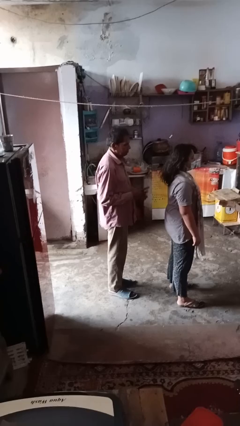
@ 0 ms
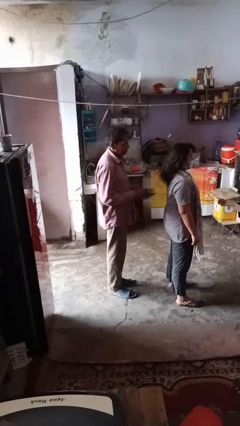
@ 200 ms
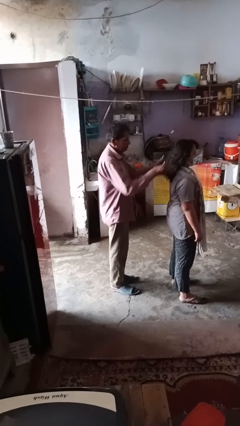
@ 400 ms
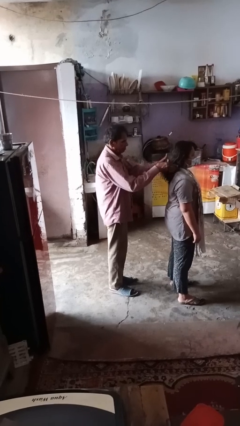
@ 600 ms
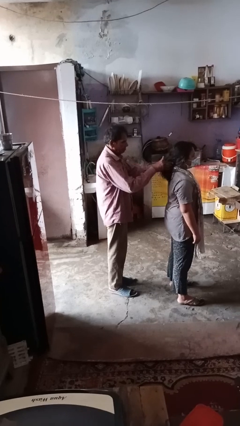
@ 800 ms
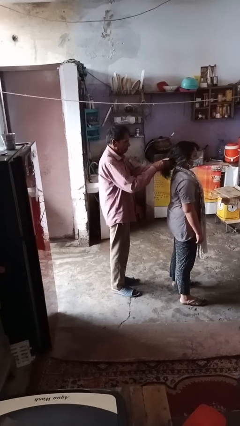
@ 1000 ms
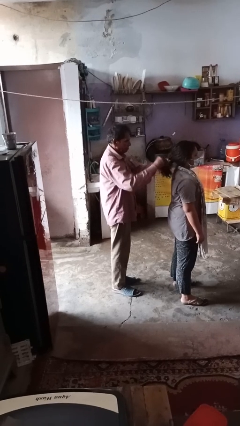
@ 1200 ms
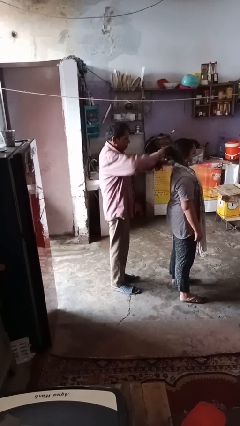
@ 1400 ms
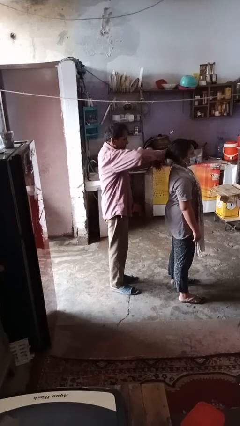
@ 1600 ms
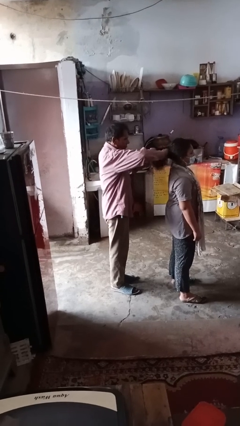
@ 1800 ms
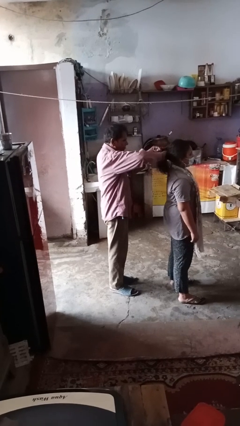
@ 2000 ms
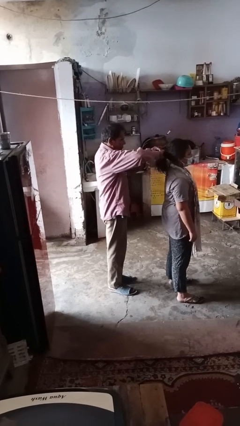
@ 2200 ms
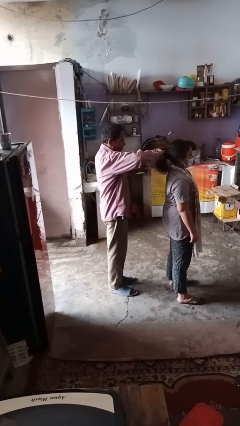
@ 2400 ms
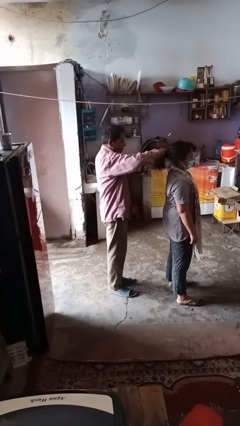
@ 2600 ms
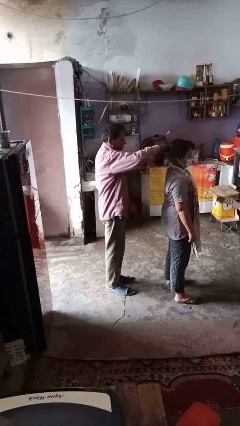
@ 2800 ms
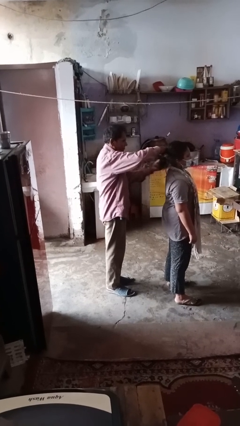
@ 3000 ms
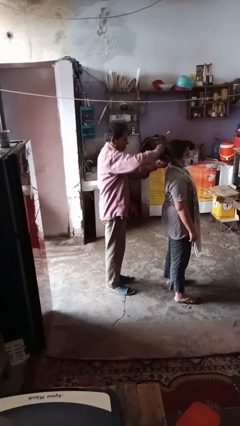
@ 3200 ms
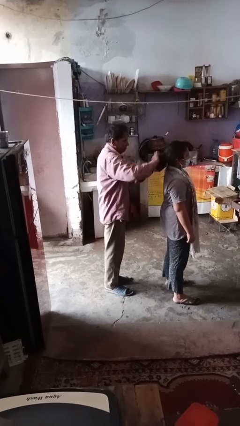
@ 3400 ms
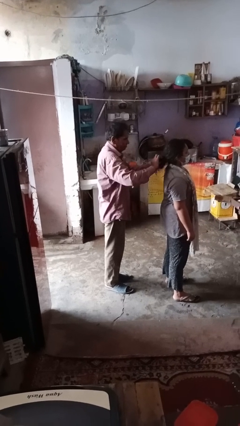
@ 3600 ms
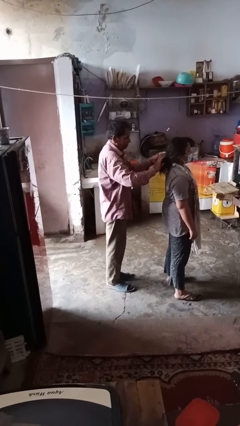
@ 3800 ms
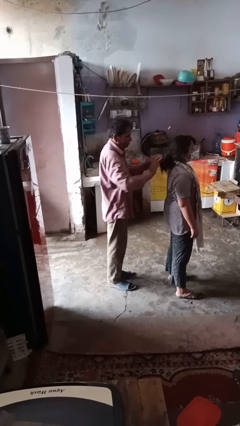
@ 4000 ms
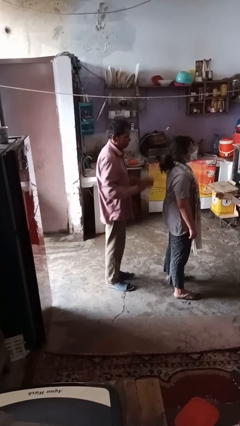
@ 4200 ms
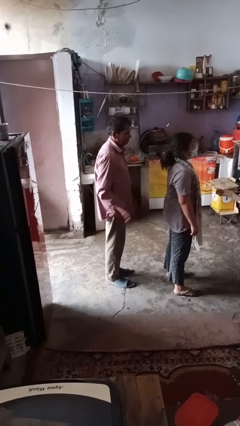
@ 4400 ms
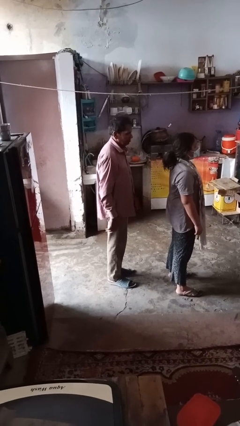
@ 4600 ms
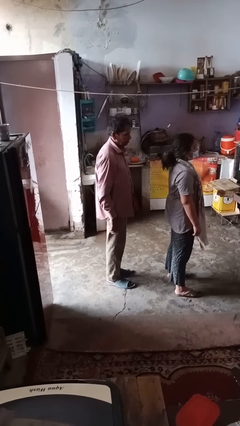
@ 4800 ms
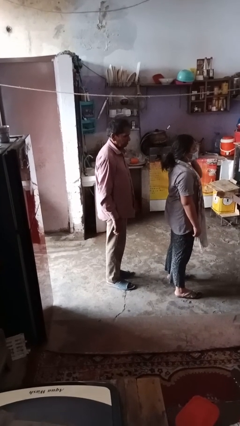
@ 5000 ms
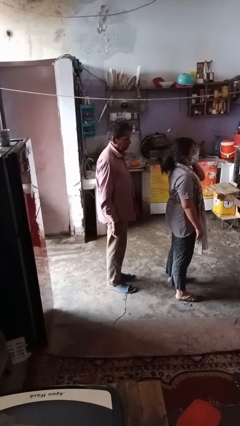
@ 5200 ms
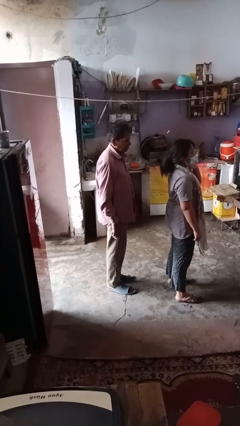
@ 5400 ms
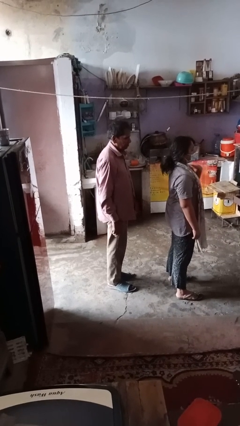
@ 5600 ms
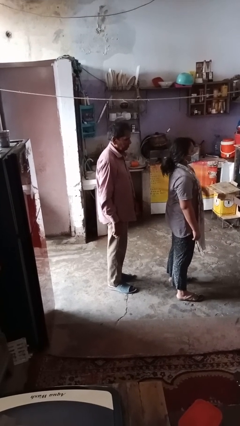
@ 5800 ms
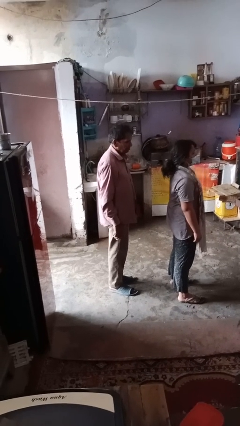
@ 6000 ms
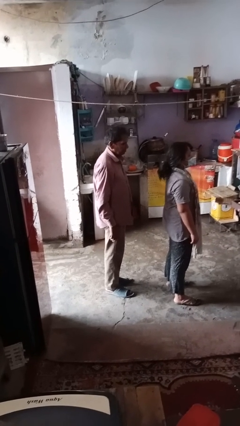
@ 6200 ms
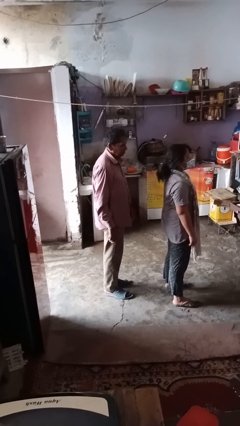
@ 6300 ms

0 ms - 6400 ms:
person braids hair of person

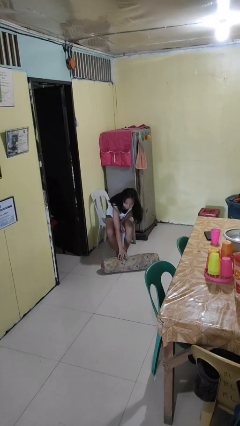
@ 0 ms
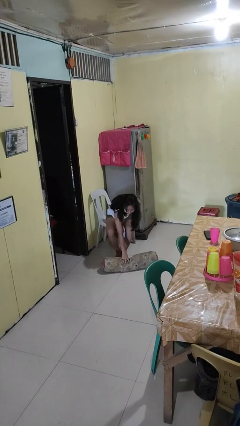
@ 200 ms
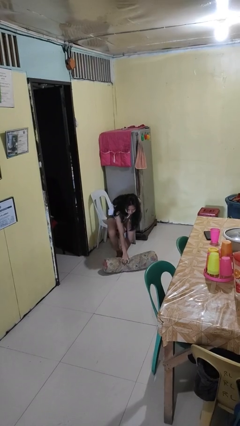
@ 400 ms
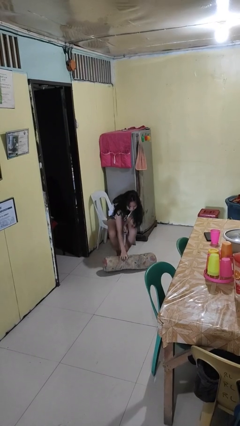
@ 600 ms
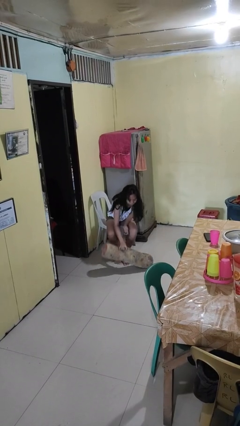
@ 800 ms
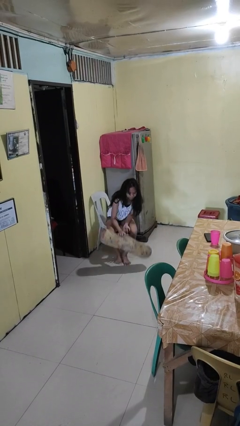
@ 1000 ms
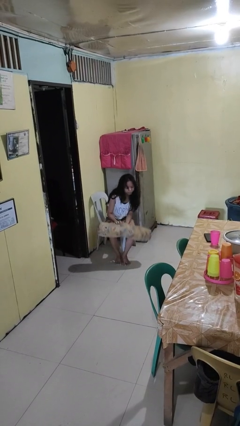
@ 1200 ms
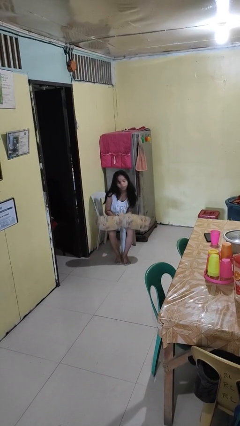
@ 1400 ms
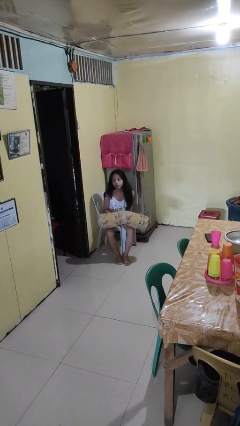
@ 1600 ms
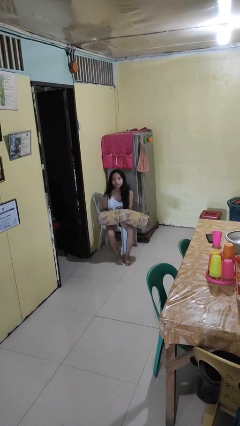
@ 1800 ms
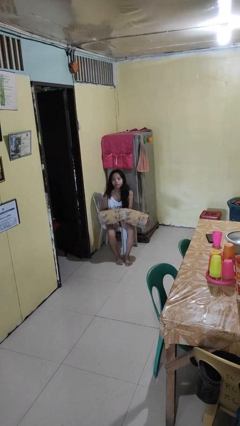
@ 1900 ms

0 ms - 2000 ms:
person picks up object from floor

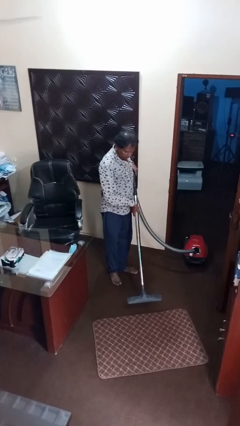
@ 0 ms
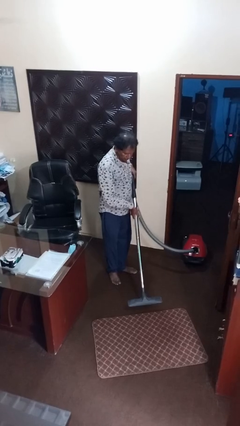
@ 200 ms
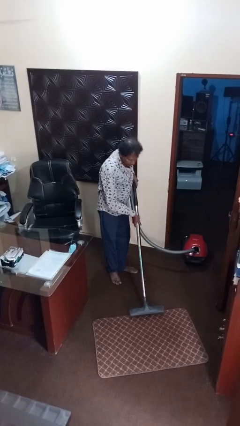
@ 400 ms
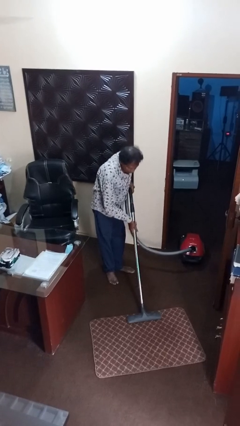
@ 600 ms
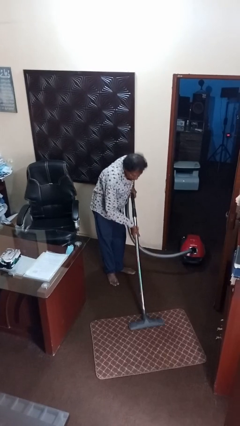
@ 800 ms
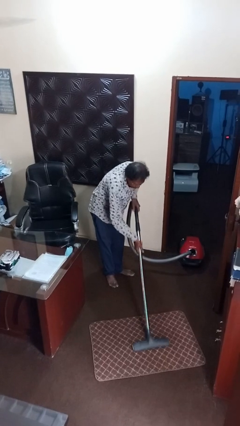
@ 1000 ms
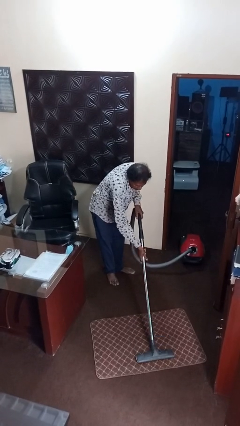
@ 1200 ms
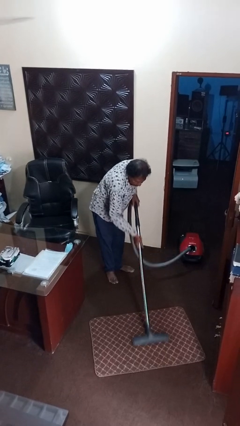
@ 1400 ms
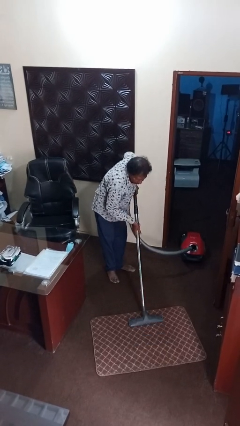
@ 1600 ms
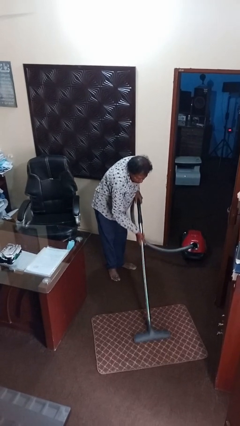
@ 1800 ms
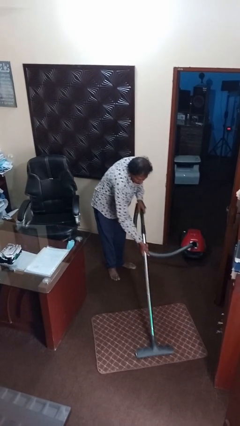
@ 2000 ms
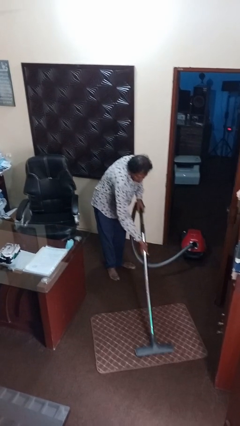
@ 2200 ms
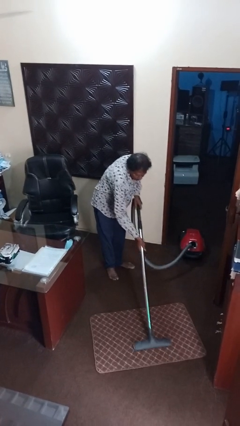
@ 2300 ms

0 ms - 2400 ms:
person vacuums carpet

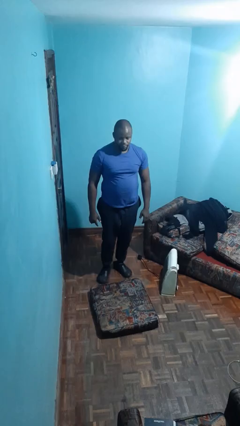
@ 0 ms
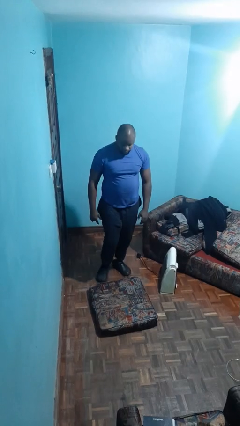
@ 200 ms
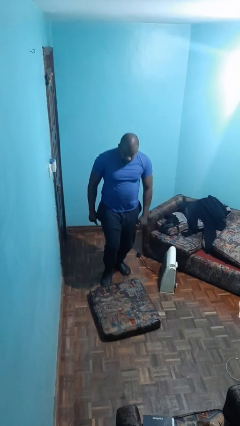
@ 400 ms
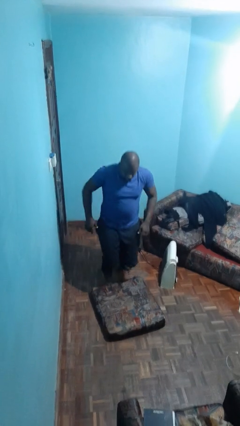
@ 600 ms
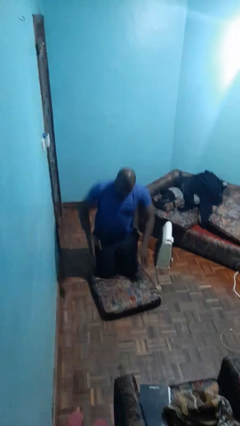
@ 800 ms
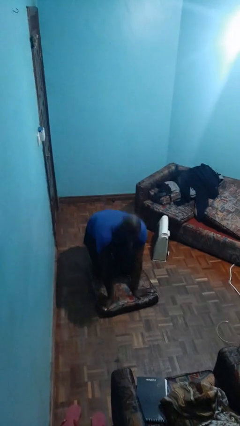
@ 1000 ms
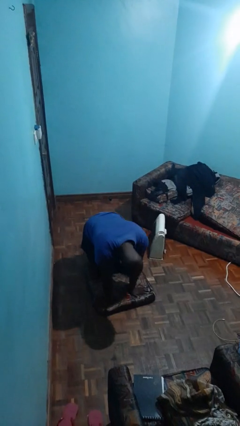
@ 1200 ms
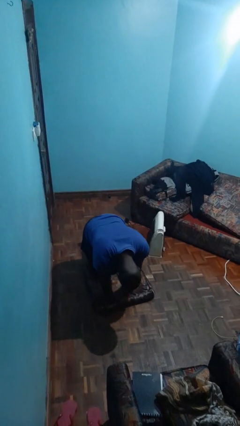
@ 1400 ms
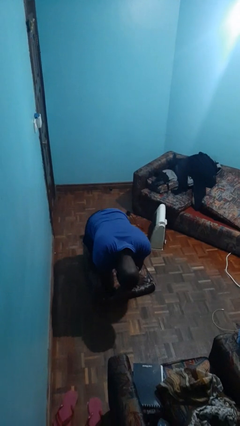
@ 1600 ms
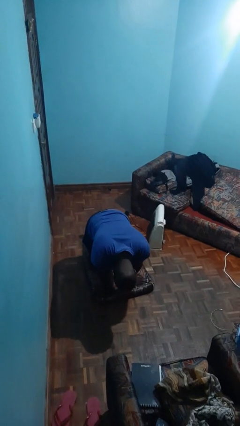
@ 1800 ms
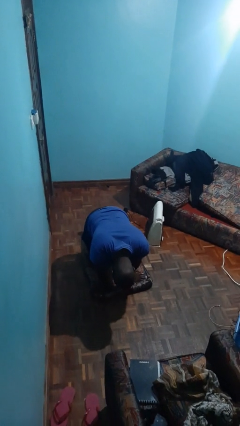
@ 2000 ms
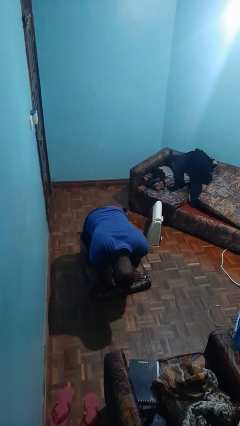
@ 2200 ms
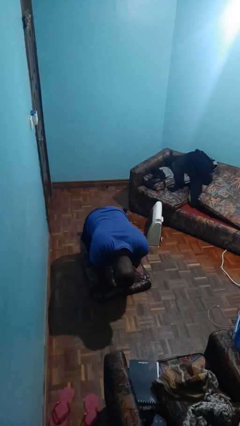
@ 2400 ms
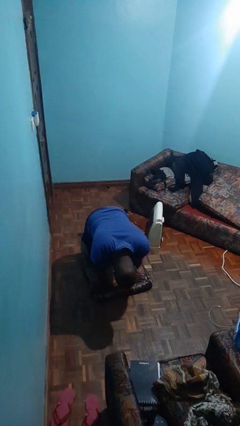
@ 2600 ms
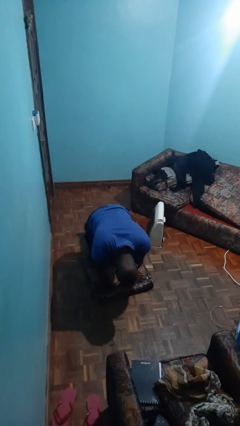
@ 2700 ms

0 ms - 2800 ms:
person trips on object on floor

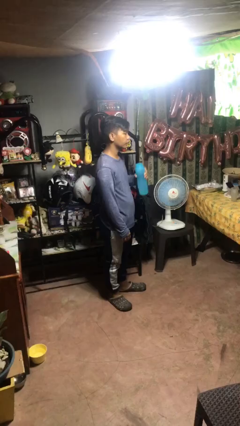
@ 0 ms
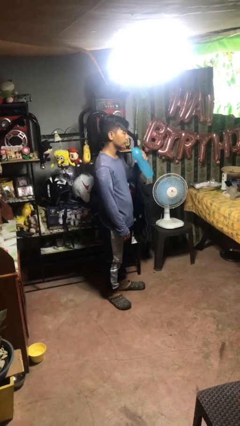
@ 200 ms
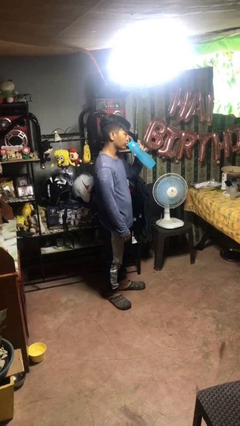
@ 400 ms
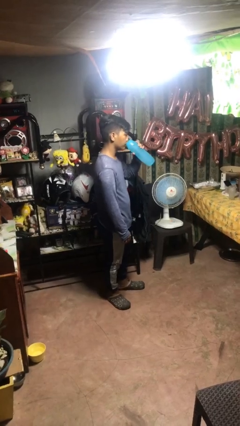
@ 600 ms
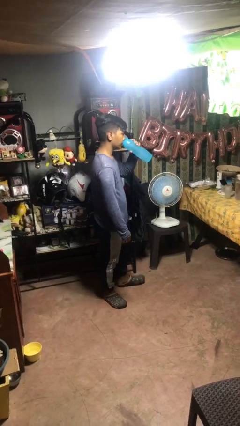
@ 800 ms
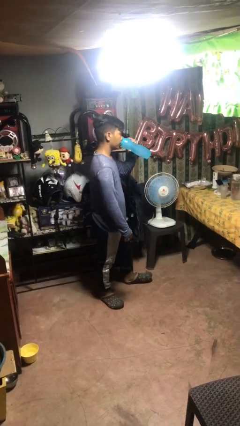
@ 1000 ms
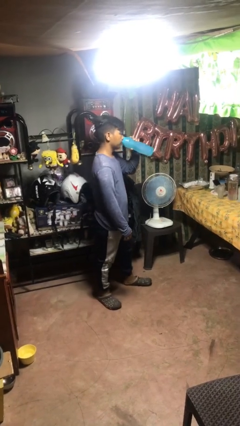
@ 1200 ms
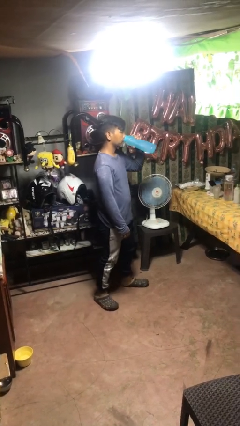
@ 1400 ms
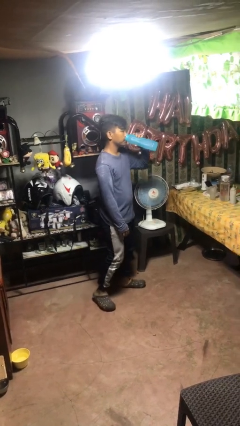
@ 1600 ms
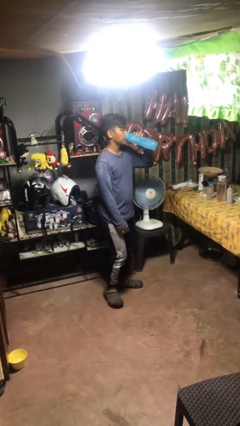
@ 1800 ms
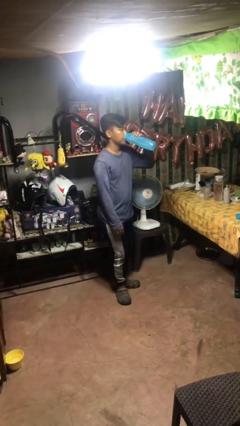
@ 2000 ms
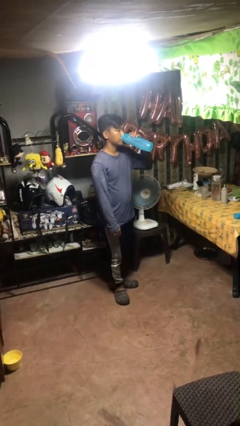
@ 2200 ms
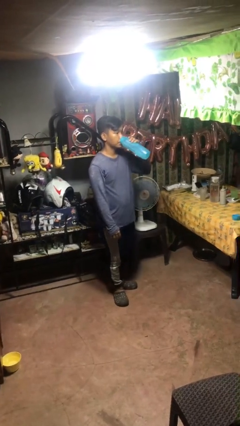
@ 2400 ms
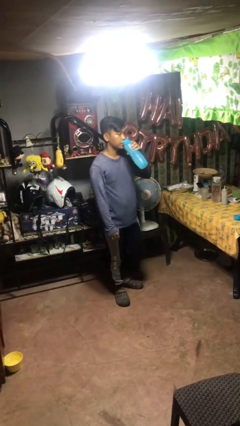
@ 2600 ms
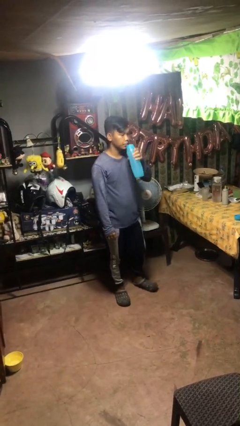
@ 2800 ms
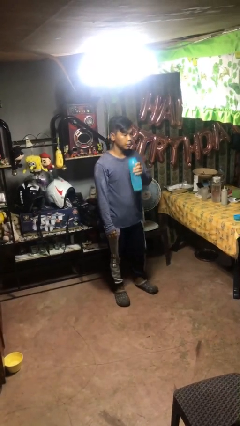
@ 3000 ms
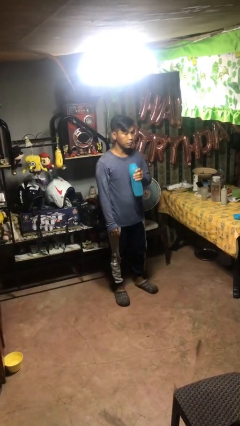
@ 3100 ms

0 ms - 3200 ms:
person drinks from bottle

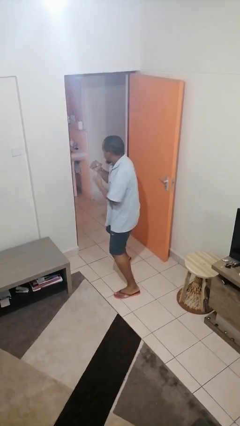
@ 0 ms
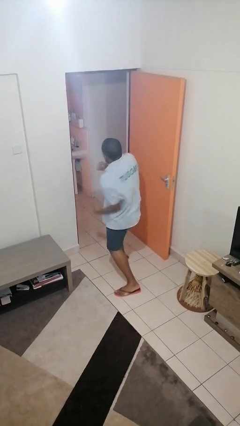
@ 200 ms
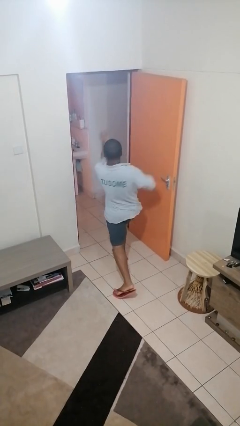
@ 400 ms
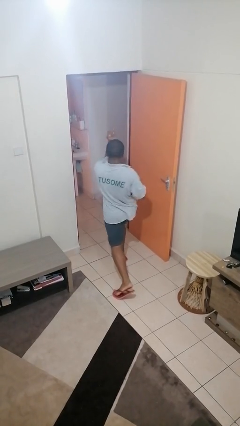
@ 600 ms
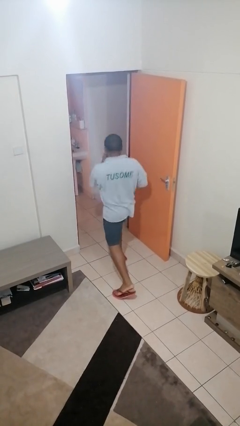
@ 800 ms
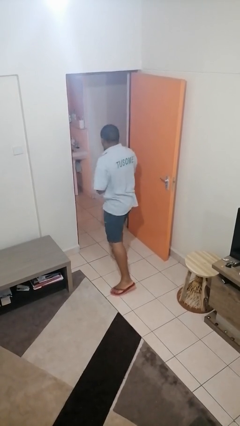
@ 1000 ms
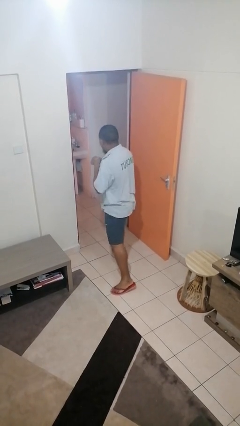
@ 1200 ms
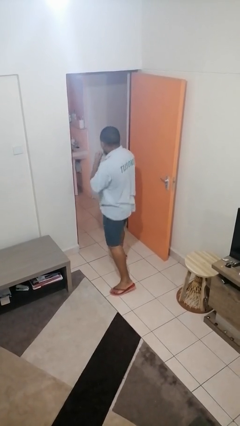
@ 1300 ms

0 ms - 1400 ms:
person punches
